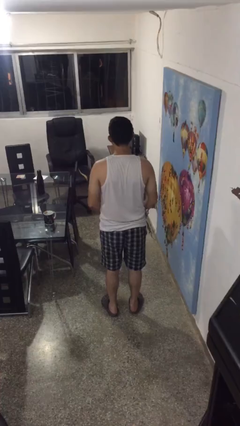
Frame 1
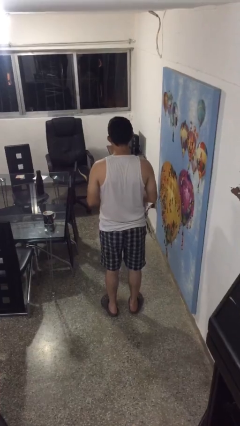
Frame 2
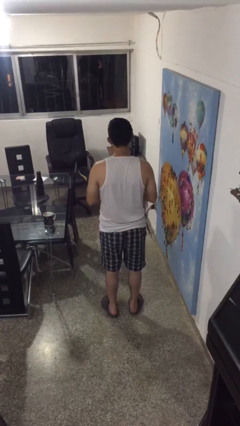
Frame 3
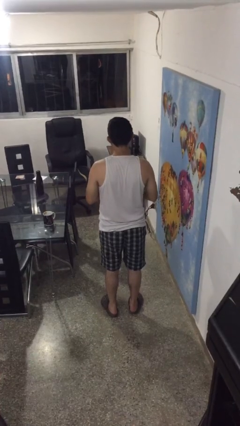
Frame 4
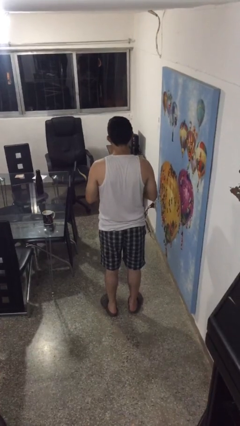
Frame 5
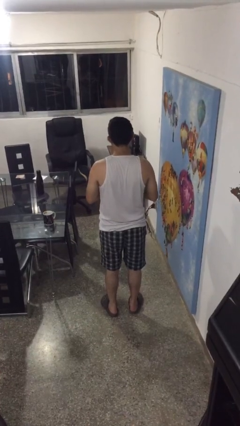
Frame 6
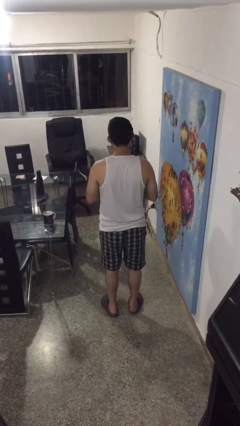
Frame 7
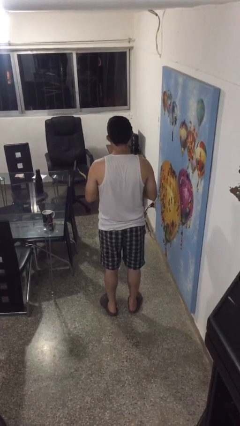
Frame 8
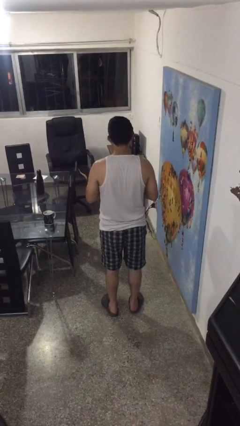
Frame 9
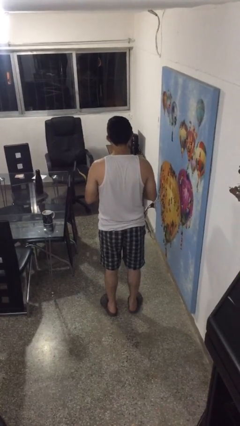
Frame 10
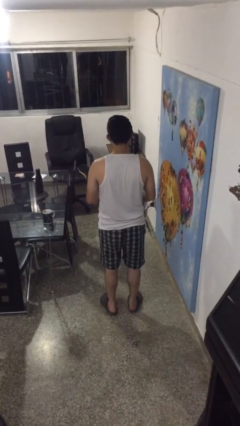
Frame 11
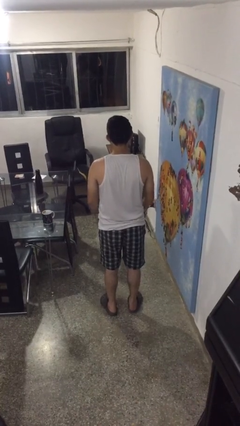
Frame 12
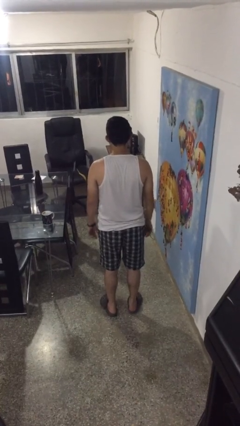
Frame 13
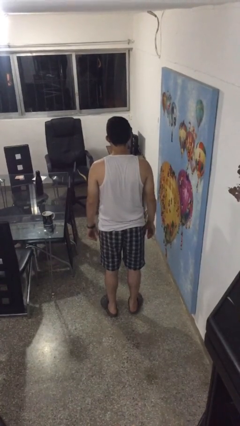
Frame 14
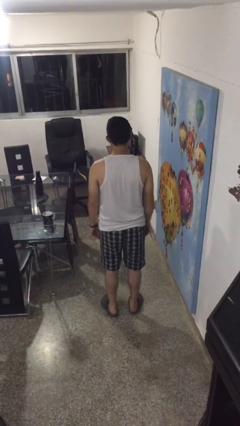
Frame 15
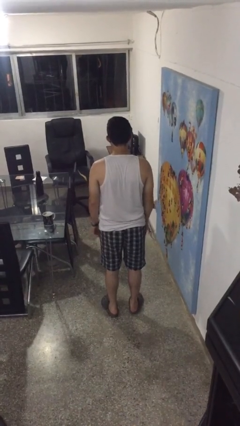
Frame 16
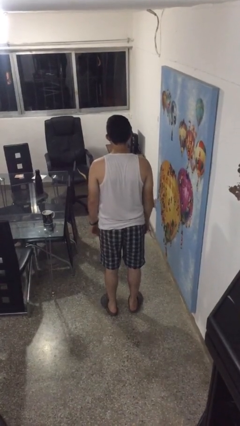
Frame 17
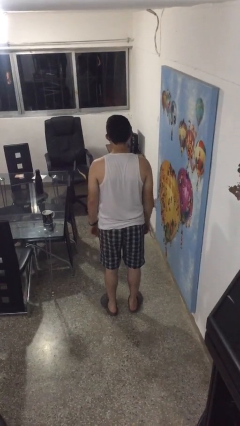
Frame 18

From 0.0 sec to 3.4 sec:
person cracks knuckles

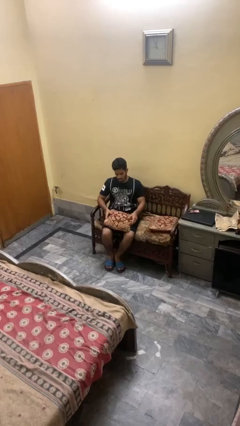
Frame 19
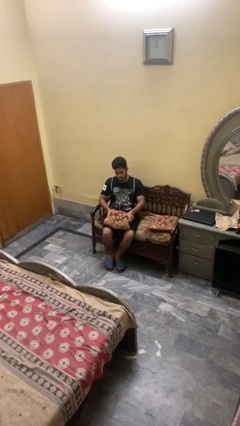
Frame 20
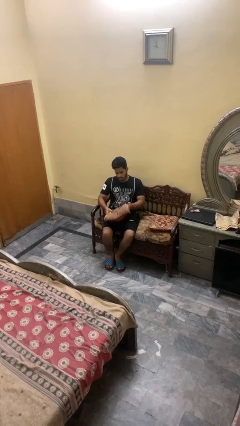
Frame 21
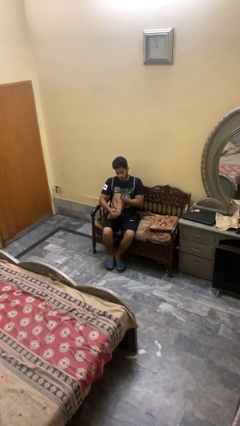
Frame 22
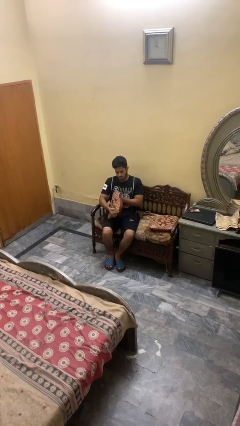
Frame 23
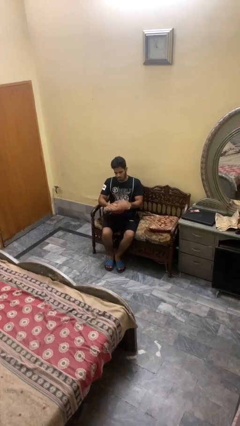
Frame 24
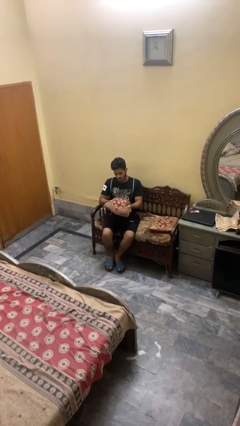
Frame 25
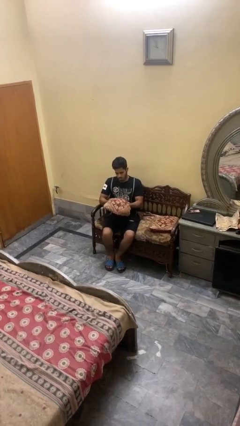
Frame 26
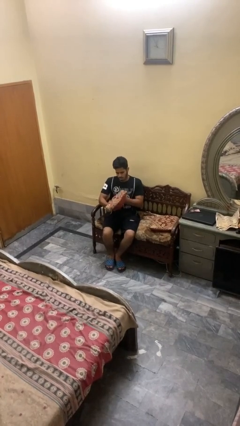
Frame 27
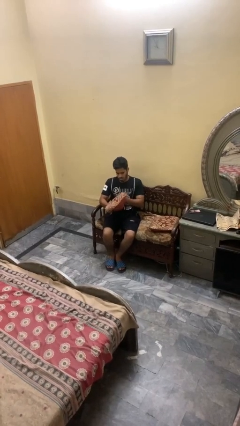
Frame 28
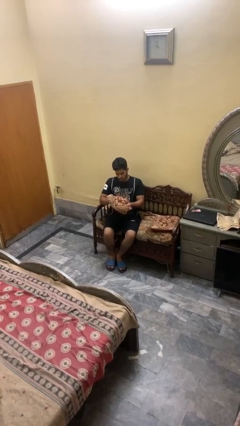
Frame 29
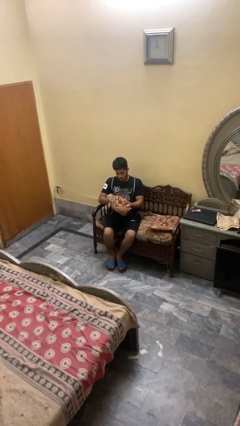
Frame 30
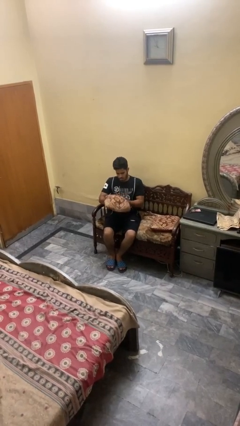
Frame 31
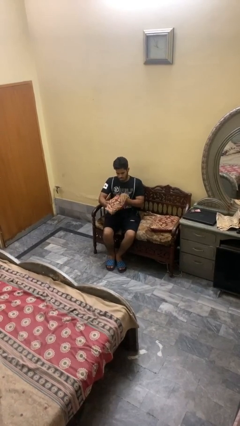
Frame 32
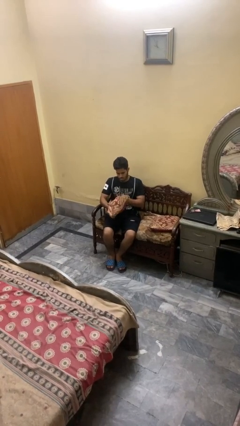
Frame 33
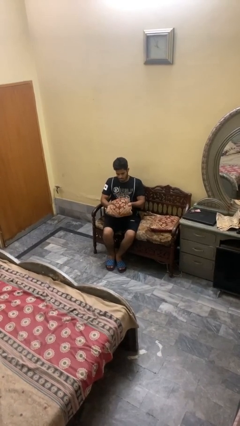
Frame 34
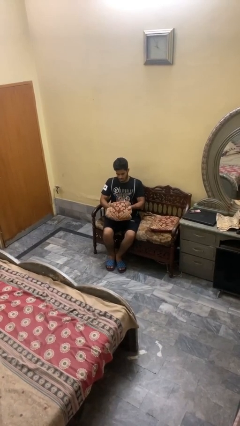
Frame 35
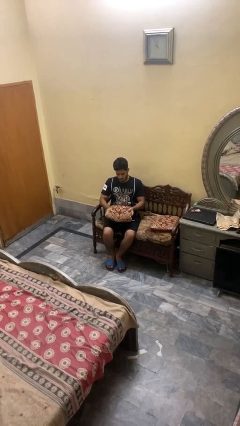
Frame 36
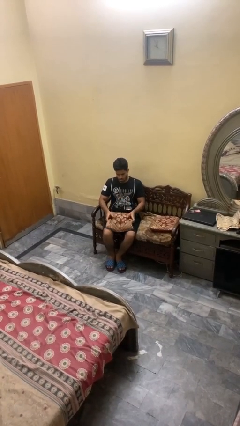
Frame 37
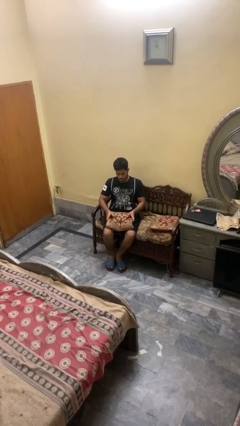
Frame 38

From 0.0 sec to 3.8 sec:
person squeezes object

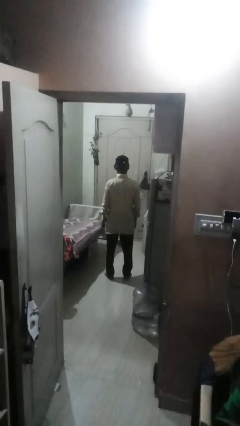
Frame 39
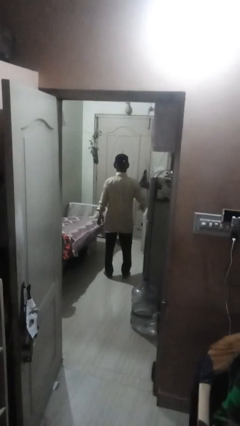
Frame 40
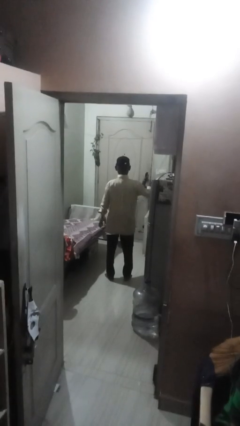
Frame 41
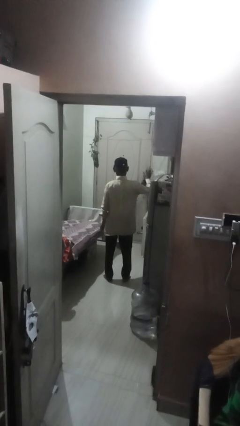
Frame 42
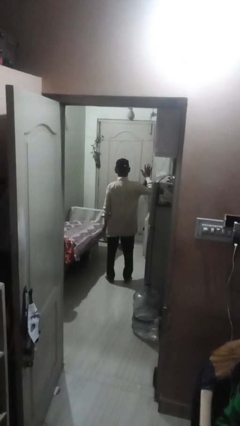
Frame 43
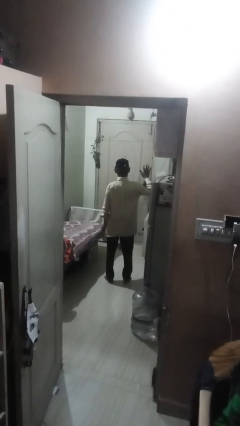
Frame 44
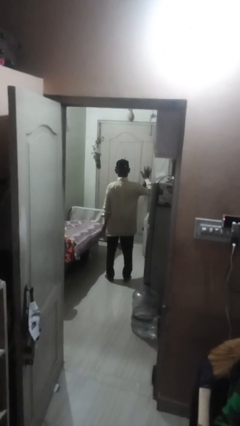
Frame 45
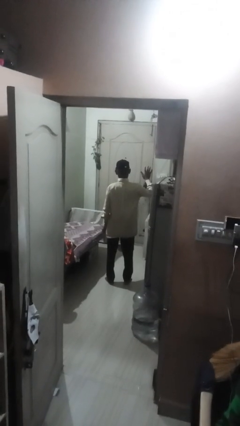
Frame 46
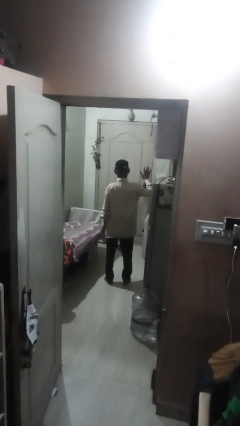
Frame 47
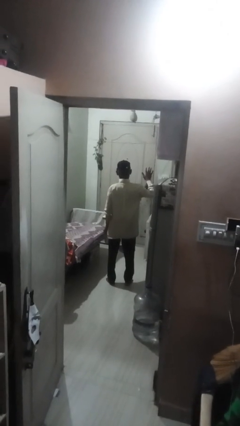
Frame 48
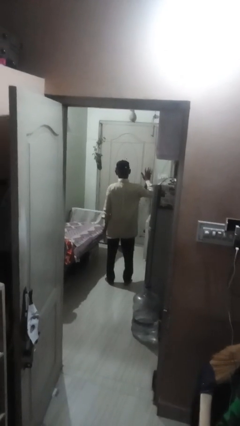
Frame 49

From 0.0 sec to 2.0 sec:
person gestures number five

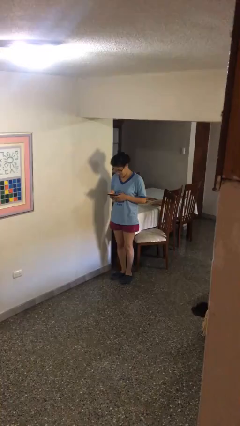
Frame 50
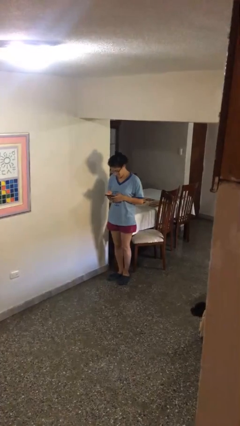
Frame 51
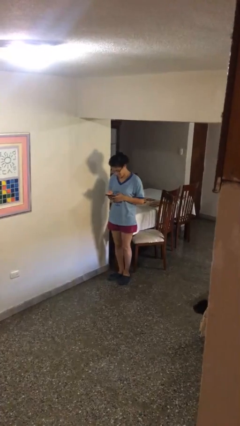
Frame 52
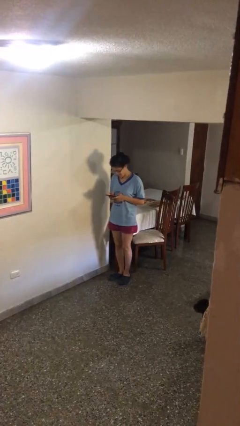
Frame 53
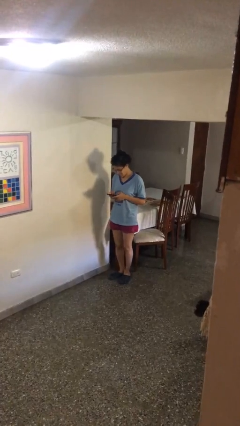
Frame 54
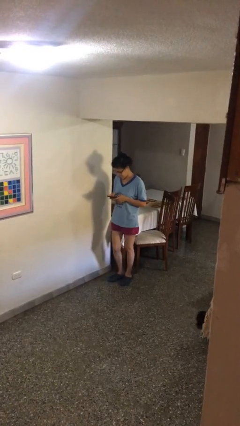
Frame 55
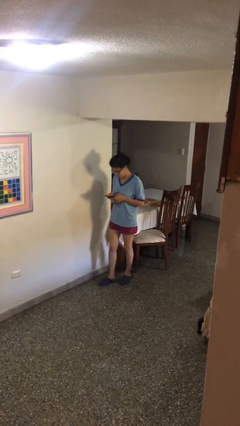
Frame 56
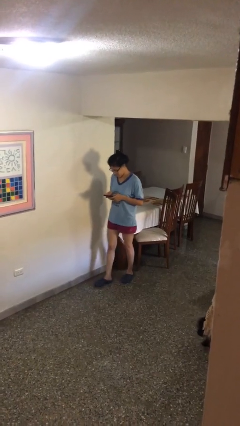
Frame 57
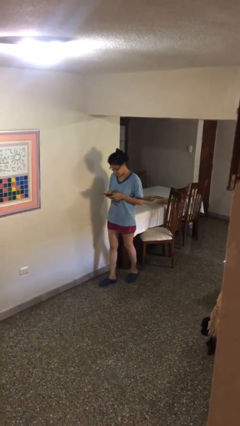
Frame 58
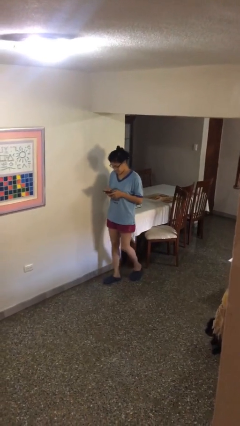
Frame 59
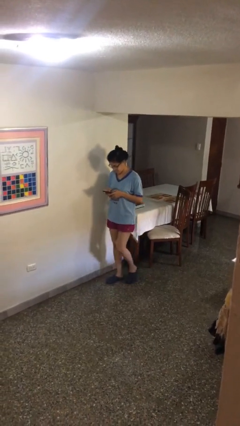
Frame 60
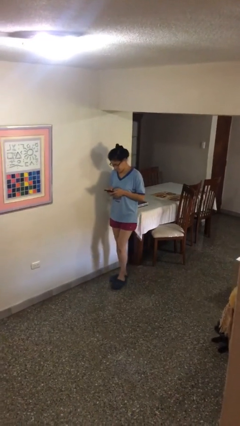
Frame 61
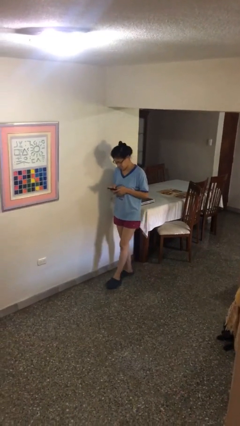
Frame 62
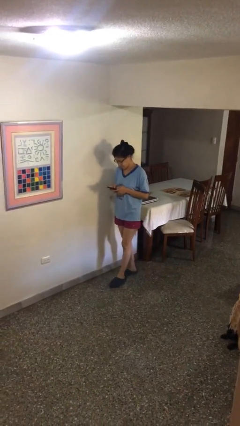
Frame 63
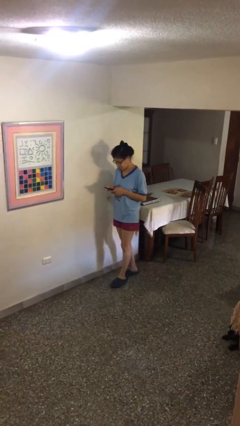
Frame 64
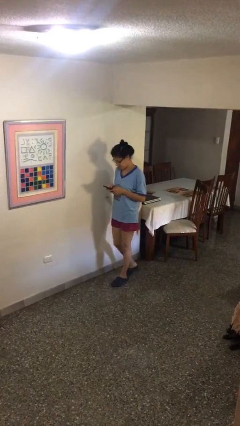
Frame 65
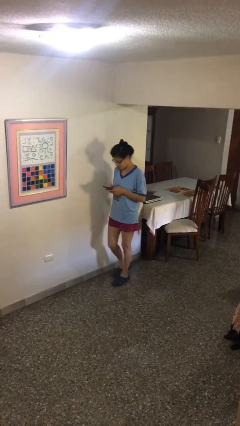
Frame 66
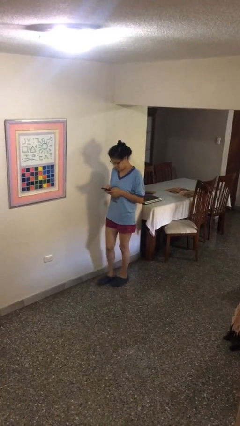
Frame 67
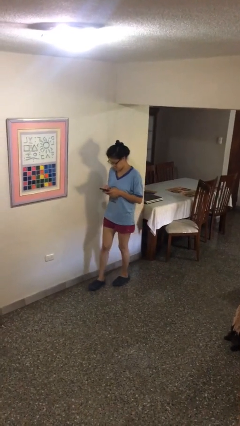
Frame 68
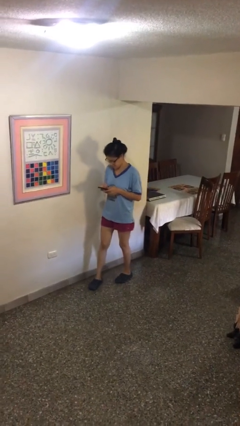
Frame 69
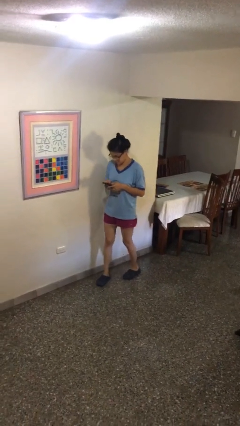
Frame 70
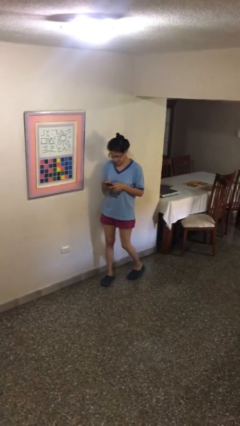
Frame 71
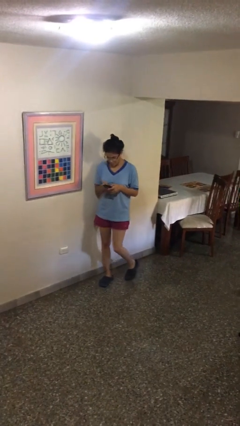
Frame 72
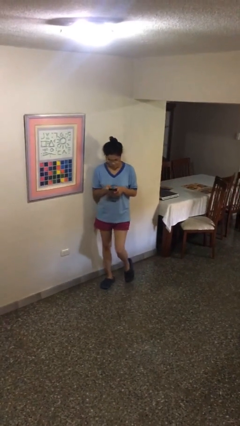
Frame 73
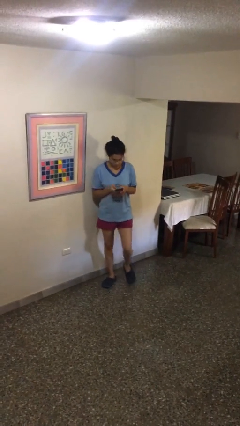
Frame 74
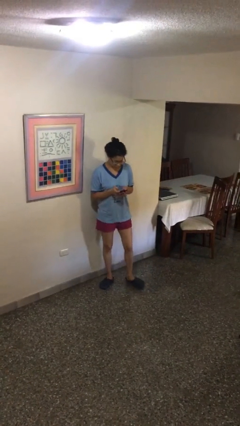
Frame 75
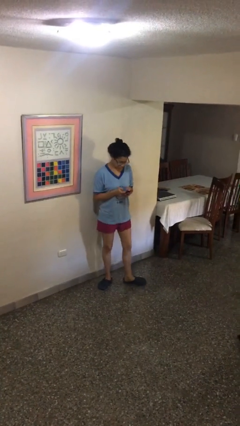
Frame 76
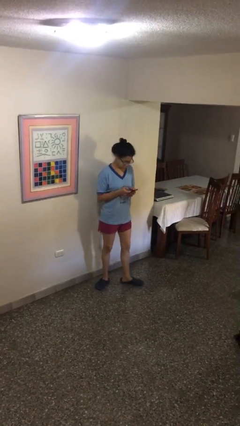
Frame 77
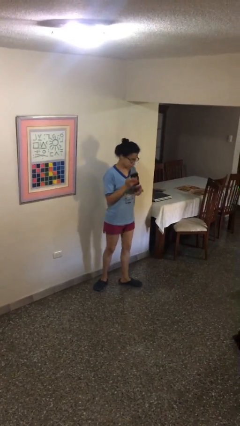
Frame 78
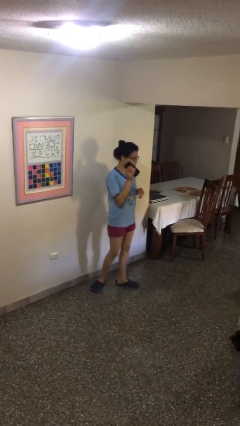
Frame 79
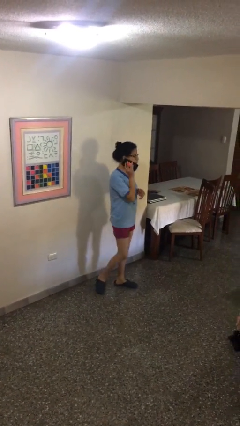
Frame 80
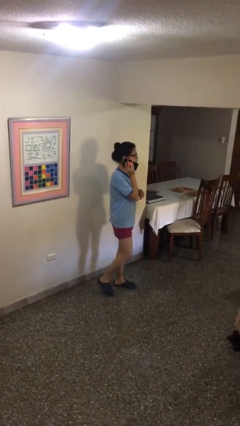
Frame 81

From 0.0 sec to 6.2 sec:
person texts on phone

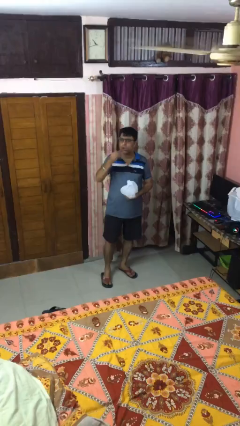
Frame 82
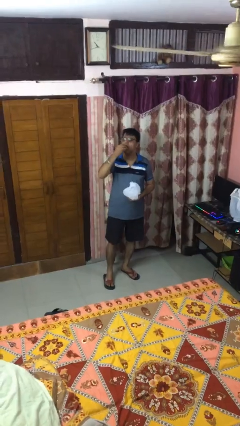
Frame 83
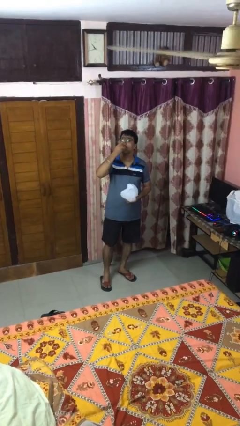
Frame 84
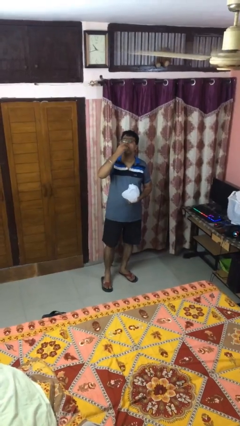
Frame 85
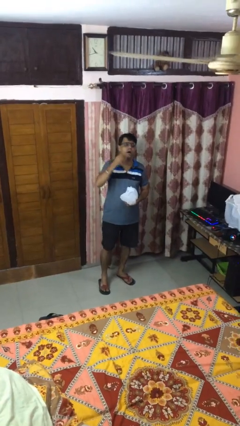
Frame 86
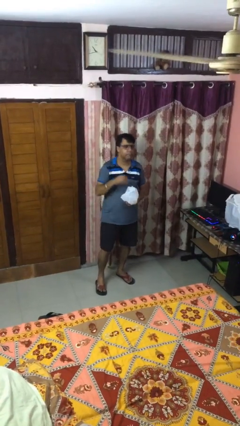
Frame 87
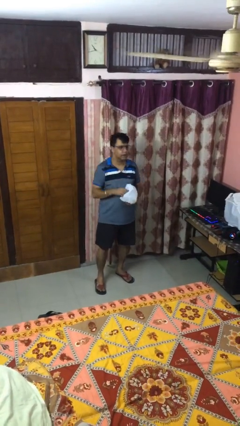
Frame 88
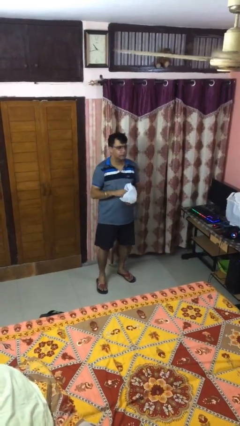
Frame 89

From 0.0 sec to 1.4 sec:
person eats snack from bag

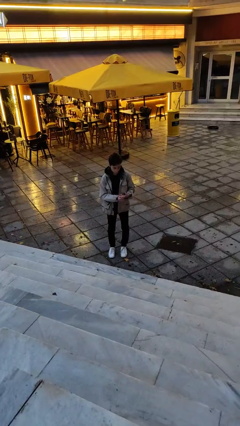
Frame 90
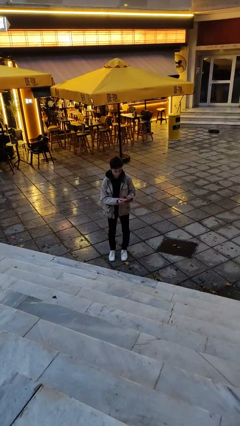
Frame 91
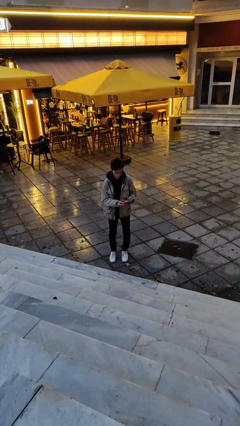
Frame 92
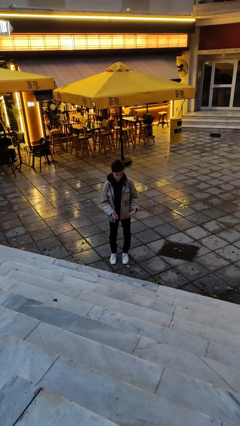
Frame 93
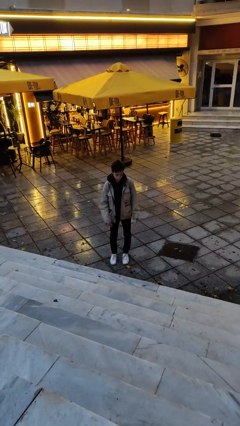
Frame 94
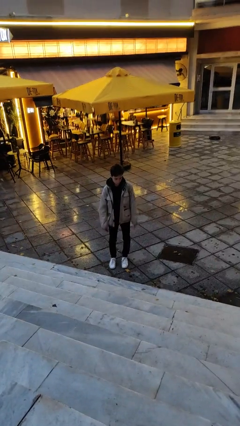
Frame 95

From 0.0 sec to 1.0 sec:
person takes off ring
